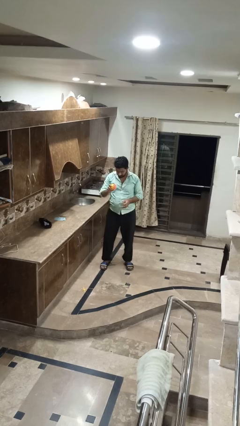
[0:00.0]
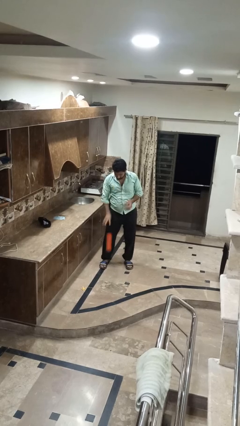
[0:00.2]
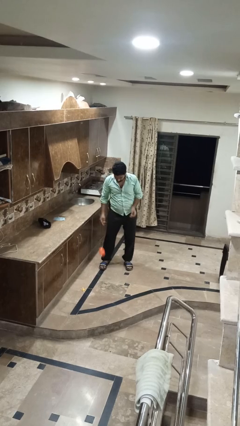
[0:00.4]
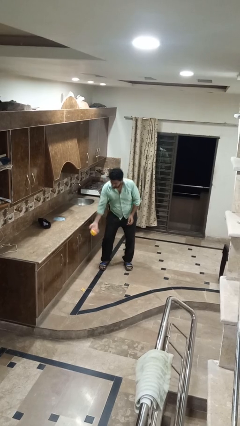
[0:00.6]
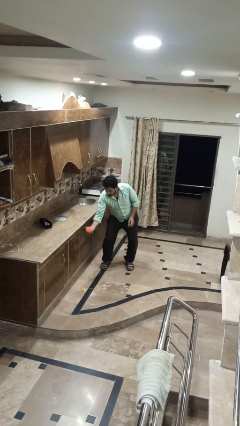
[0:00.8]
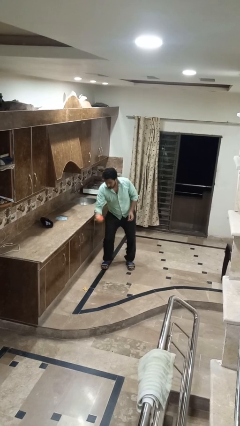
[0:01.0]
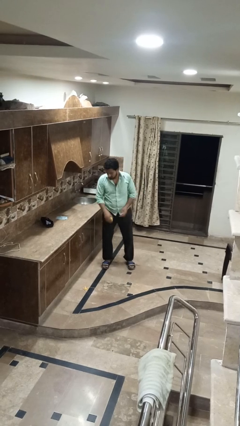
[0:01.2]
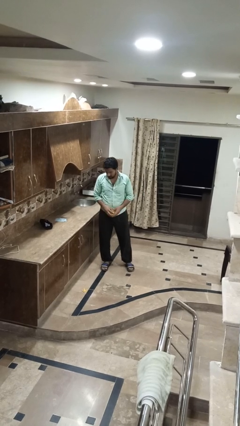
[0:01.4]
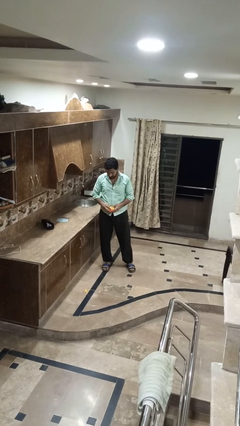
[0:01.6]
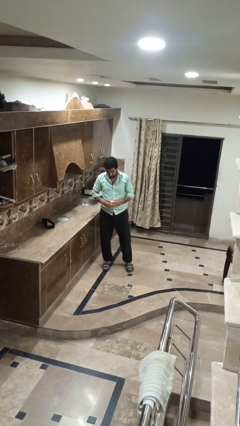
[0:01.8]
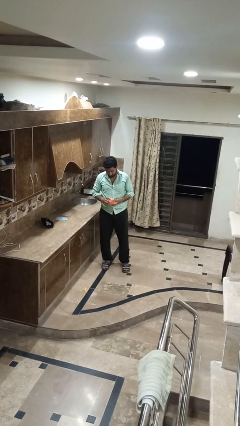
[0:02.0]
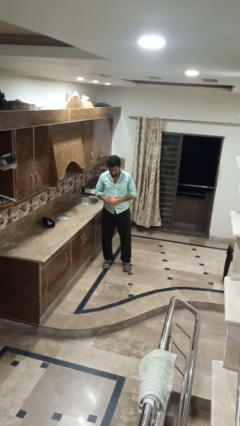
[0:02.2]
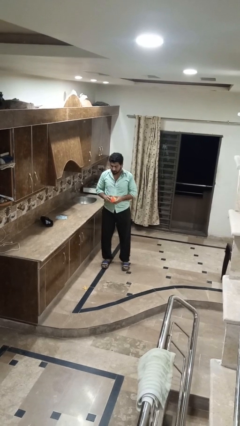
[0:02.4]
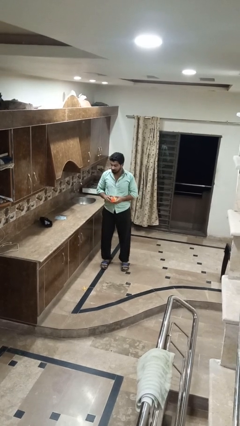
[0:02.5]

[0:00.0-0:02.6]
person bounces ball on floor

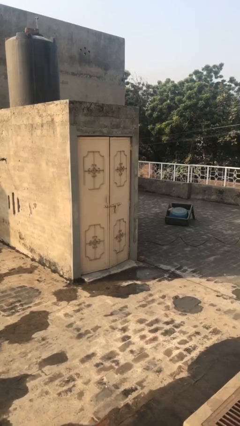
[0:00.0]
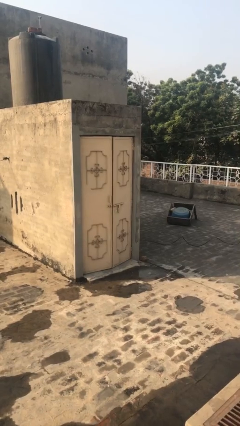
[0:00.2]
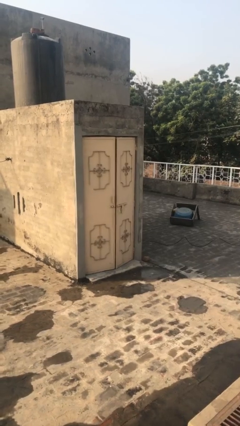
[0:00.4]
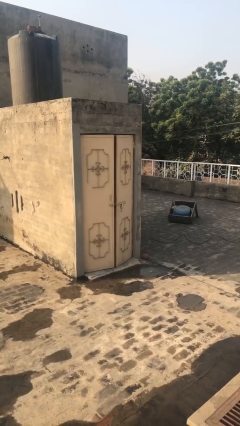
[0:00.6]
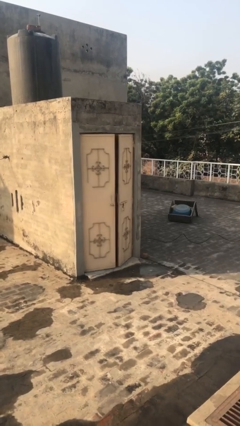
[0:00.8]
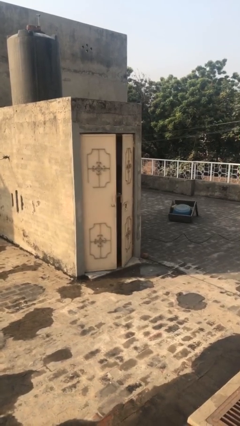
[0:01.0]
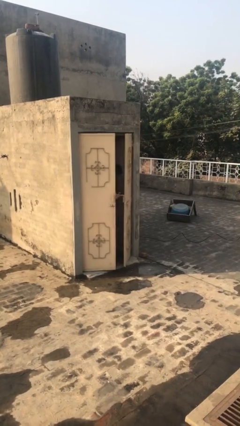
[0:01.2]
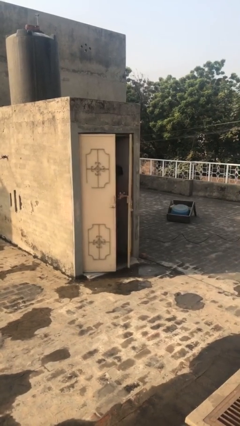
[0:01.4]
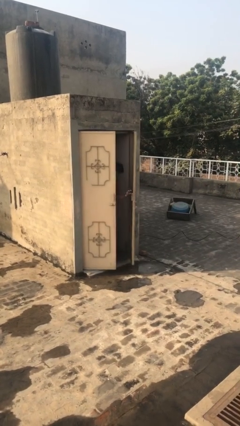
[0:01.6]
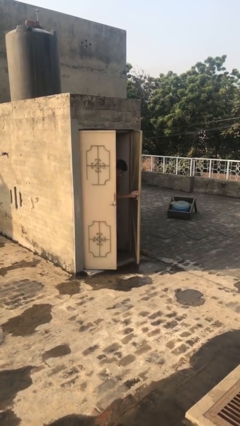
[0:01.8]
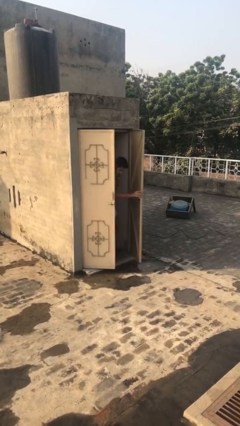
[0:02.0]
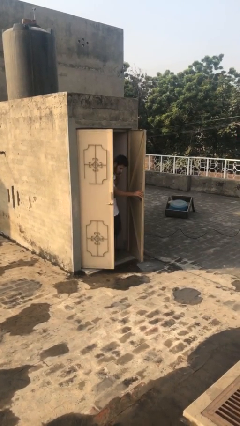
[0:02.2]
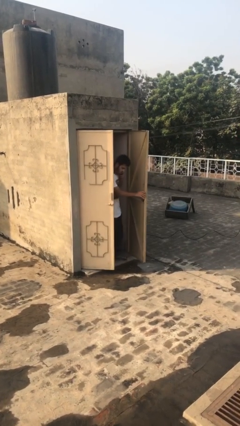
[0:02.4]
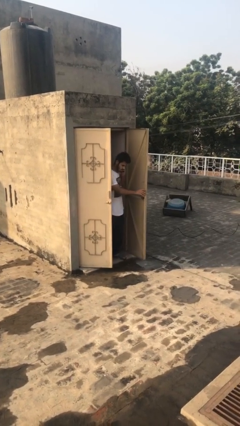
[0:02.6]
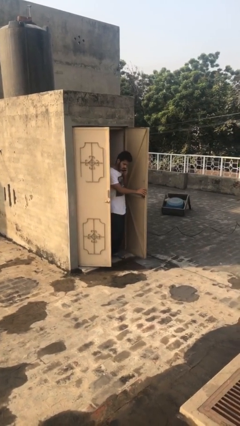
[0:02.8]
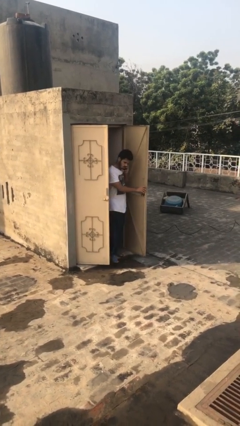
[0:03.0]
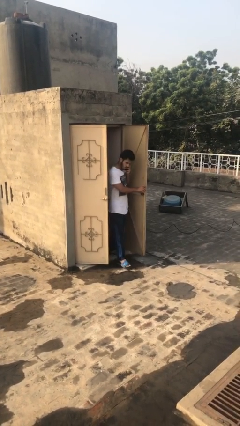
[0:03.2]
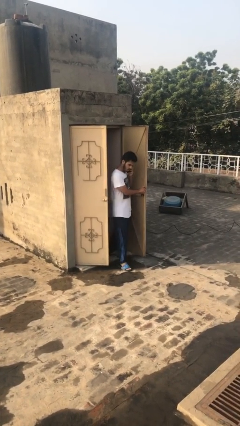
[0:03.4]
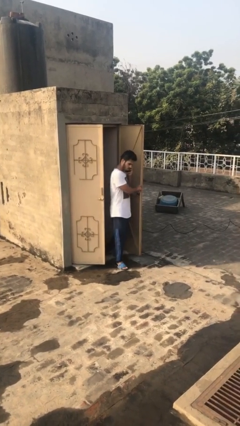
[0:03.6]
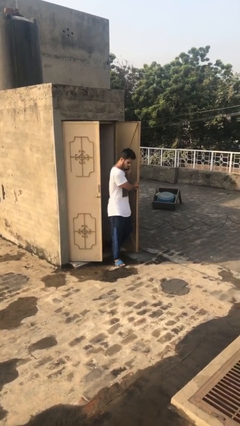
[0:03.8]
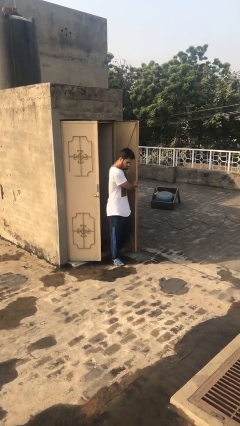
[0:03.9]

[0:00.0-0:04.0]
person opens facility door

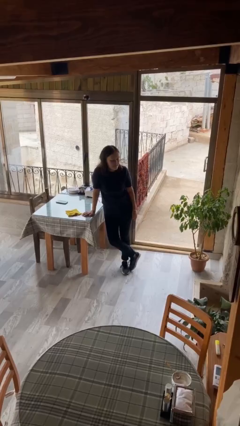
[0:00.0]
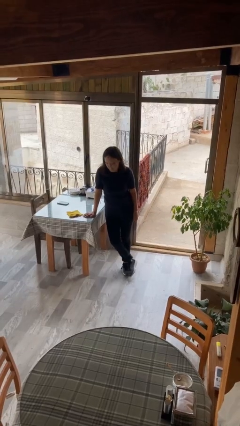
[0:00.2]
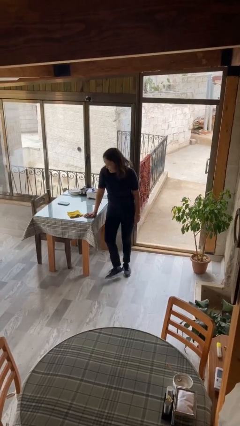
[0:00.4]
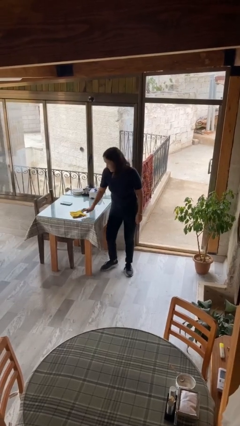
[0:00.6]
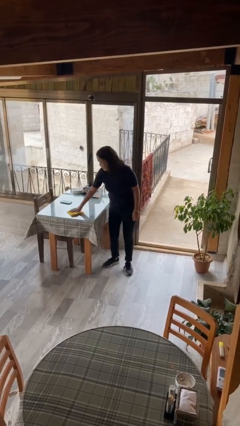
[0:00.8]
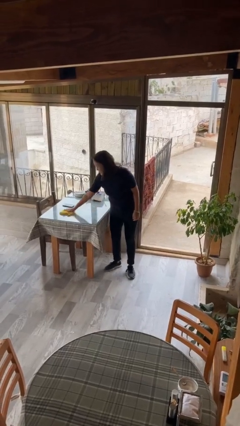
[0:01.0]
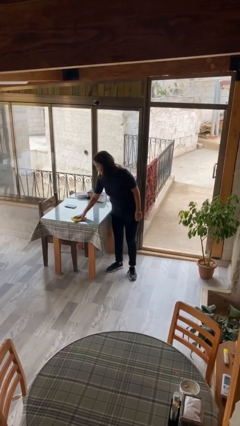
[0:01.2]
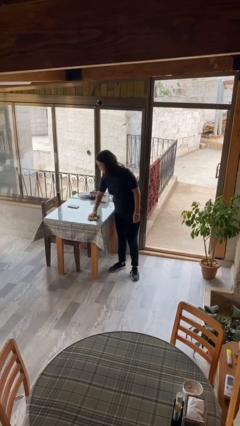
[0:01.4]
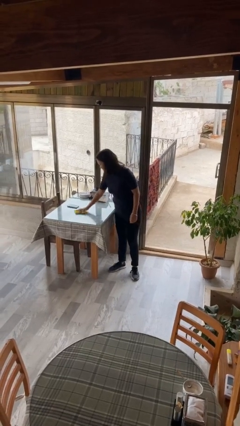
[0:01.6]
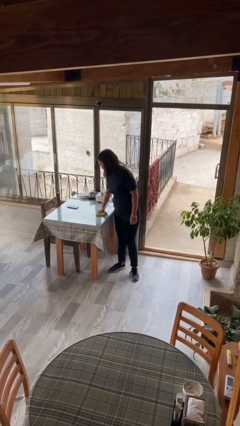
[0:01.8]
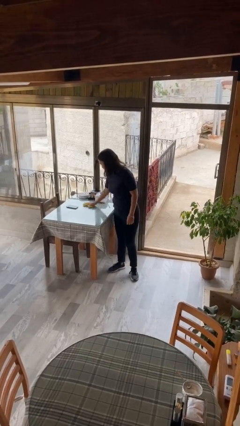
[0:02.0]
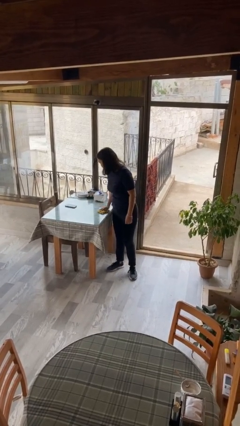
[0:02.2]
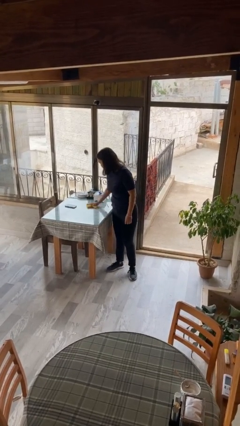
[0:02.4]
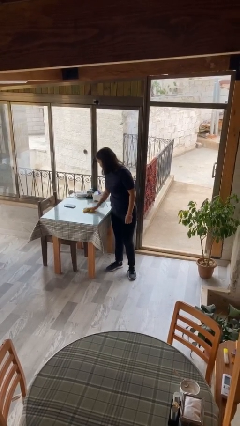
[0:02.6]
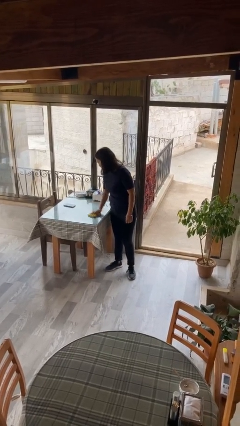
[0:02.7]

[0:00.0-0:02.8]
person cleans table with rag

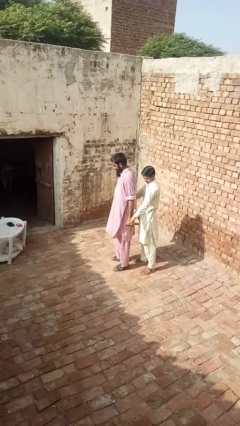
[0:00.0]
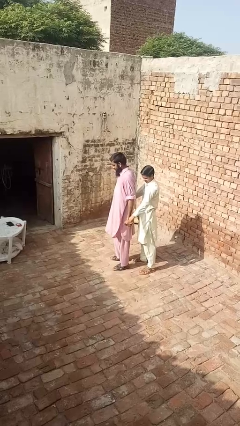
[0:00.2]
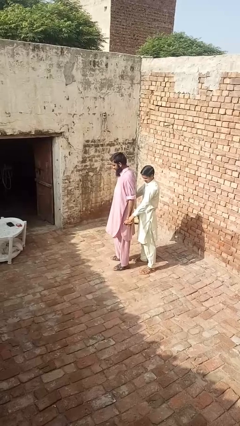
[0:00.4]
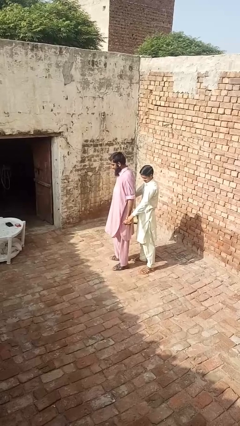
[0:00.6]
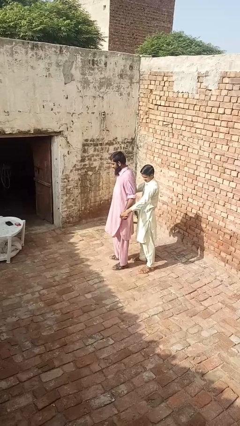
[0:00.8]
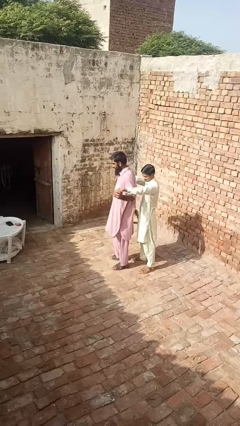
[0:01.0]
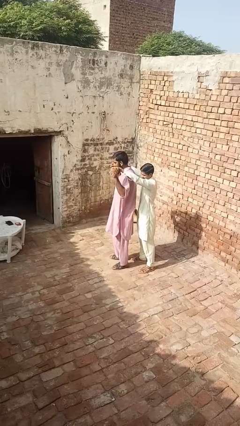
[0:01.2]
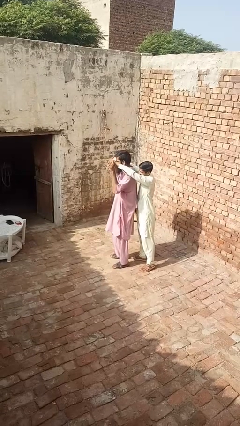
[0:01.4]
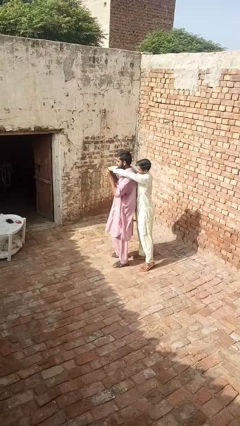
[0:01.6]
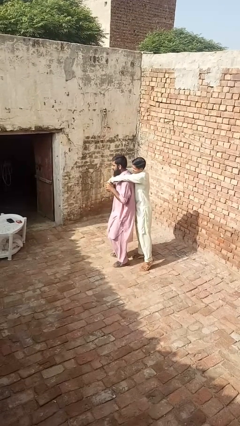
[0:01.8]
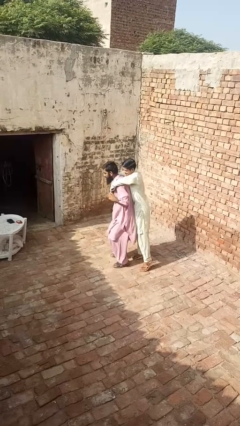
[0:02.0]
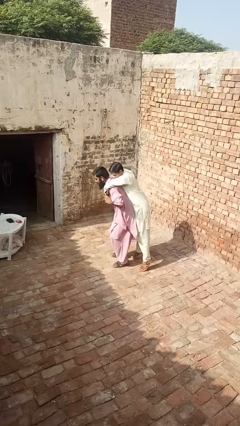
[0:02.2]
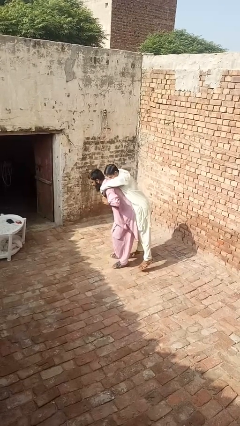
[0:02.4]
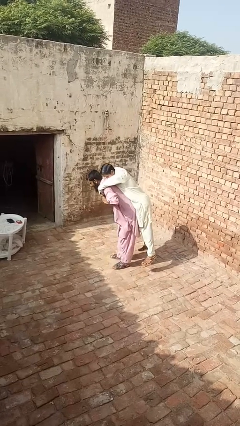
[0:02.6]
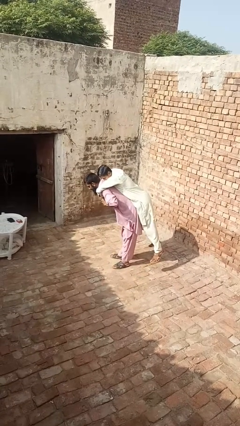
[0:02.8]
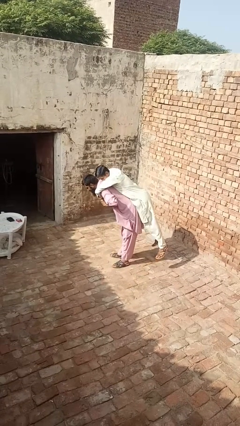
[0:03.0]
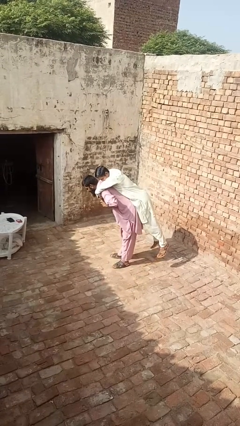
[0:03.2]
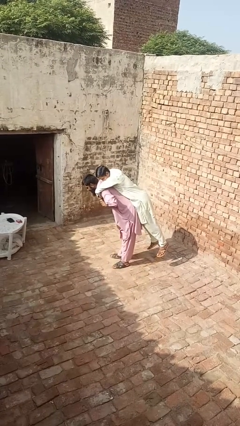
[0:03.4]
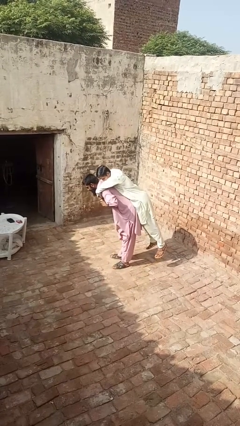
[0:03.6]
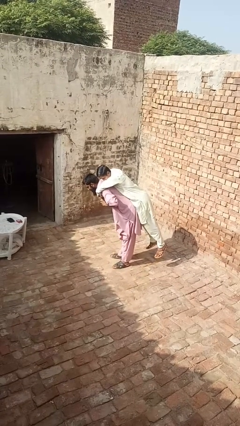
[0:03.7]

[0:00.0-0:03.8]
person picks up person

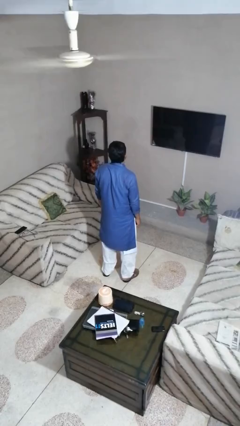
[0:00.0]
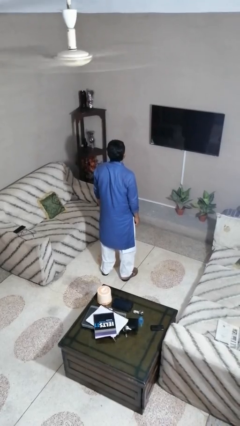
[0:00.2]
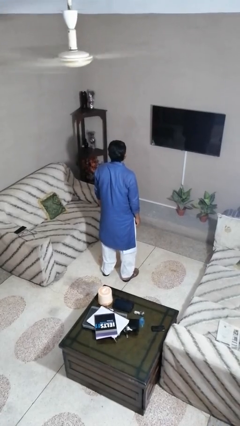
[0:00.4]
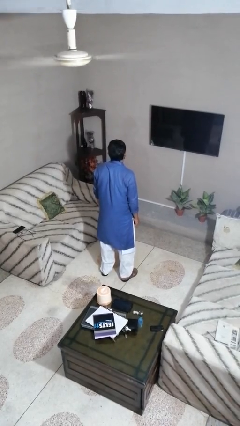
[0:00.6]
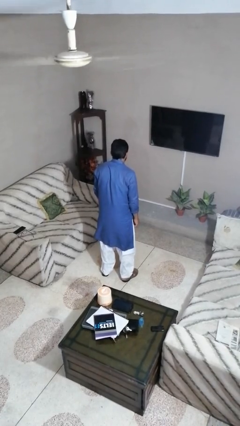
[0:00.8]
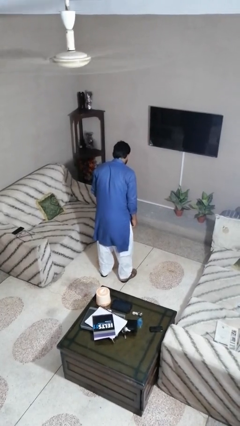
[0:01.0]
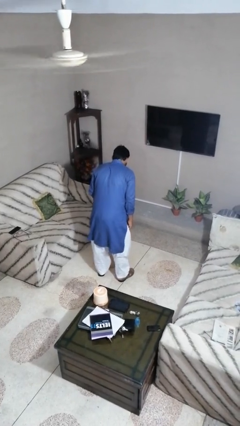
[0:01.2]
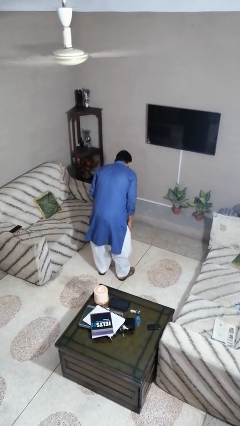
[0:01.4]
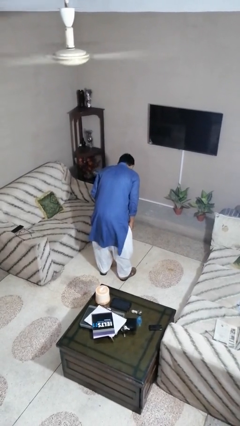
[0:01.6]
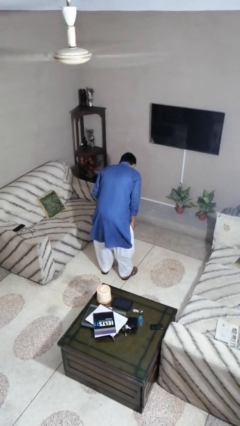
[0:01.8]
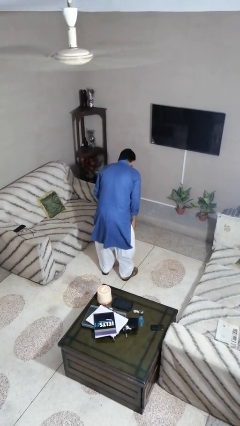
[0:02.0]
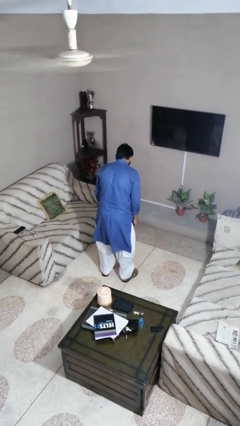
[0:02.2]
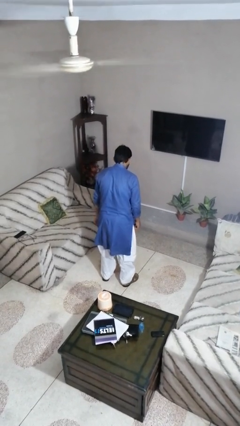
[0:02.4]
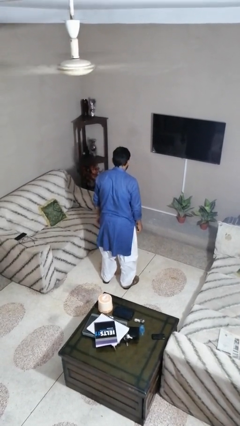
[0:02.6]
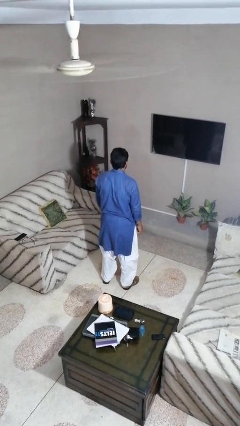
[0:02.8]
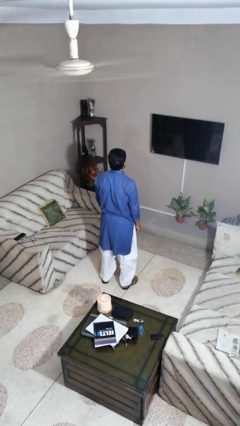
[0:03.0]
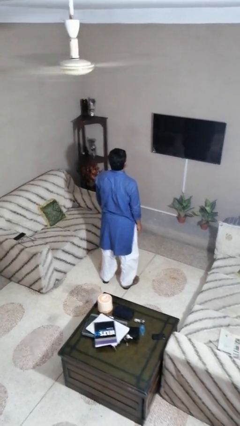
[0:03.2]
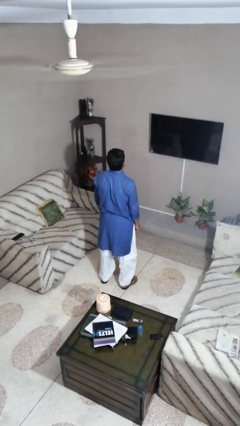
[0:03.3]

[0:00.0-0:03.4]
person bows

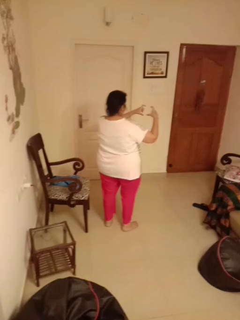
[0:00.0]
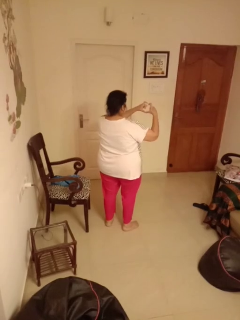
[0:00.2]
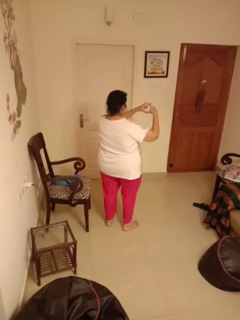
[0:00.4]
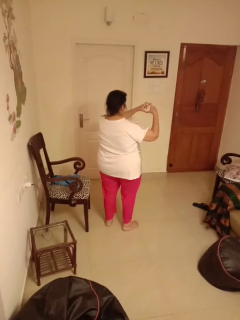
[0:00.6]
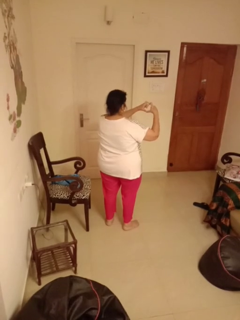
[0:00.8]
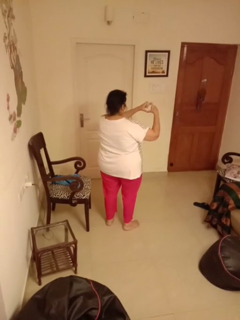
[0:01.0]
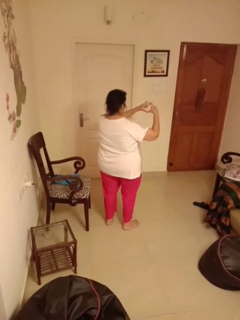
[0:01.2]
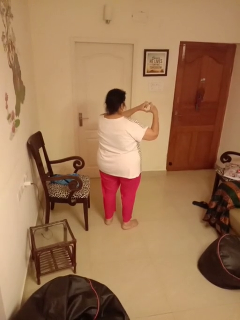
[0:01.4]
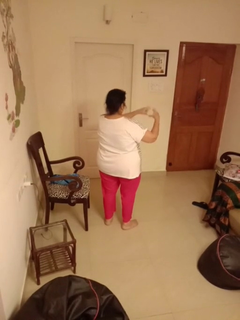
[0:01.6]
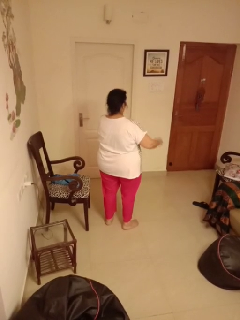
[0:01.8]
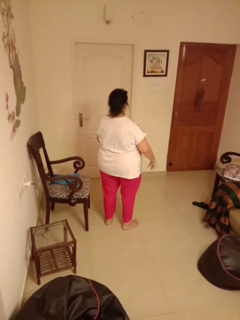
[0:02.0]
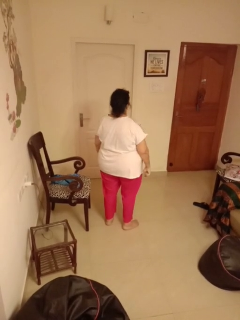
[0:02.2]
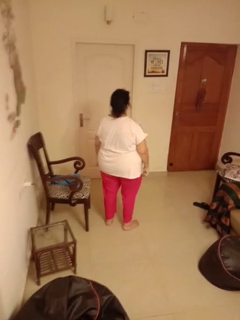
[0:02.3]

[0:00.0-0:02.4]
person gestures heart
